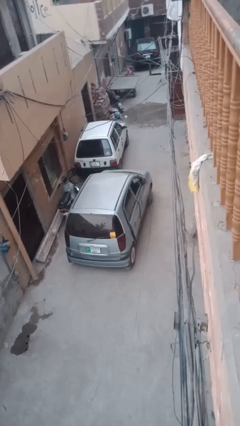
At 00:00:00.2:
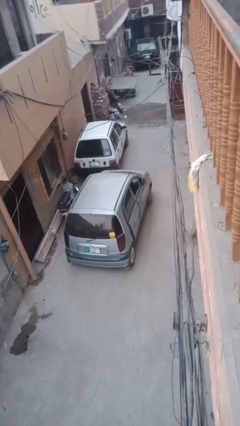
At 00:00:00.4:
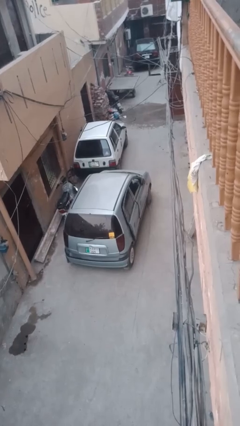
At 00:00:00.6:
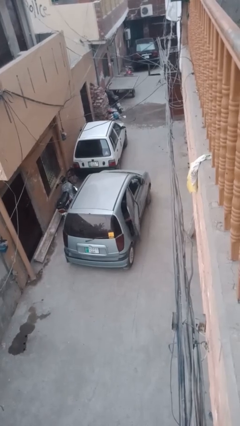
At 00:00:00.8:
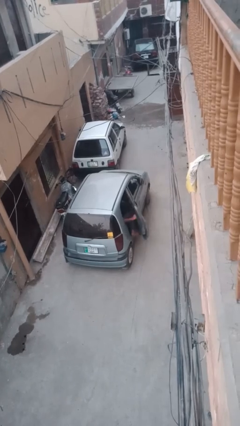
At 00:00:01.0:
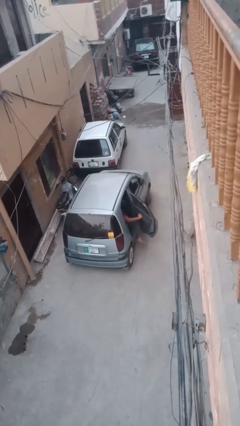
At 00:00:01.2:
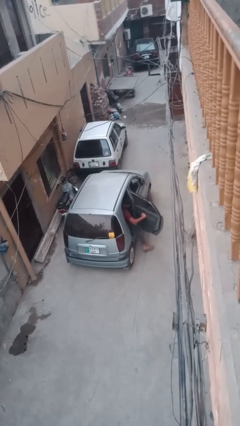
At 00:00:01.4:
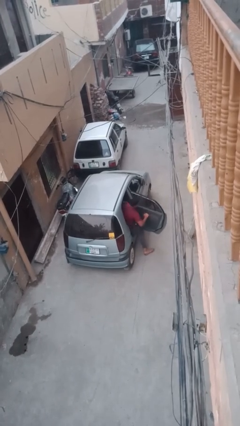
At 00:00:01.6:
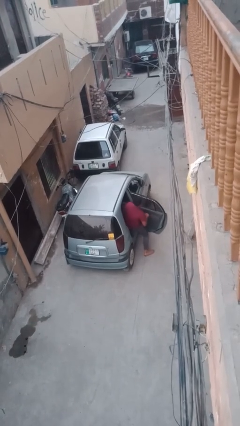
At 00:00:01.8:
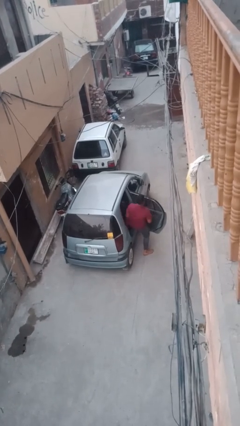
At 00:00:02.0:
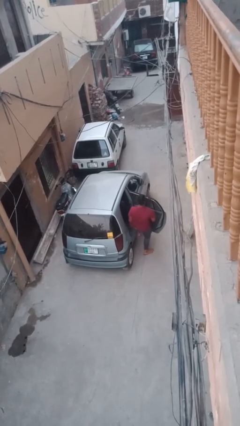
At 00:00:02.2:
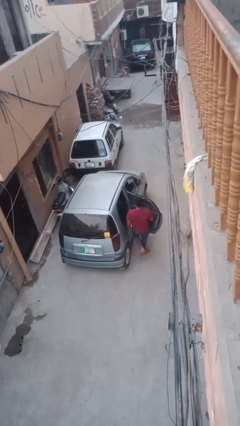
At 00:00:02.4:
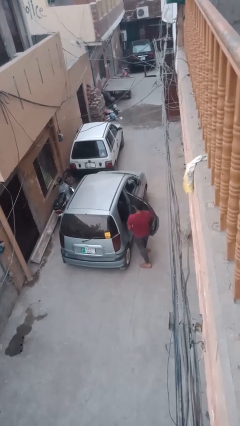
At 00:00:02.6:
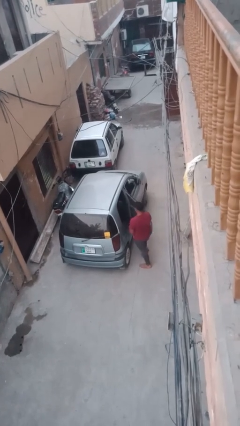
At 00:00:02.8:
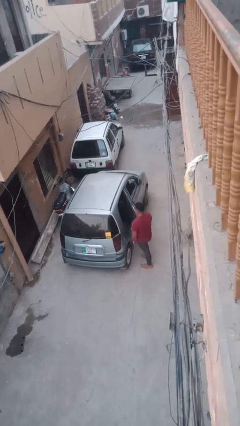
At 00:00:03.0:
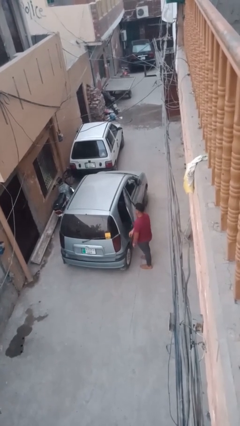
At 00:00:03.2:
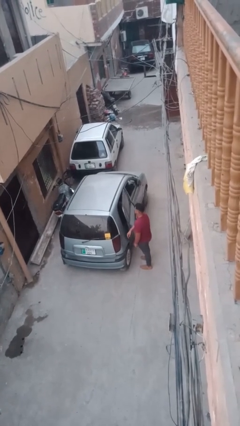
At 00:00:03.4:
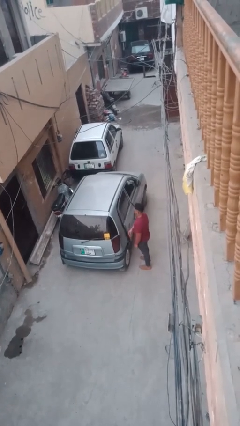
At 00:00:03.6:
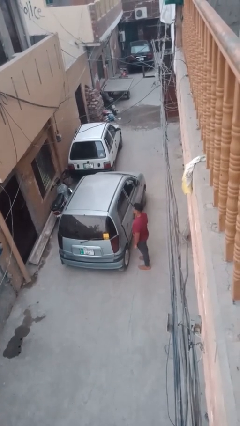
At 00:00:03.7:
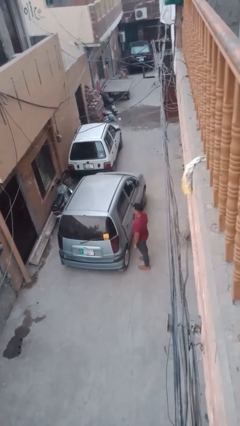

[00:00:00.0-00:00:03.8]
car drops off person

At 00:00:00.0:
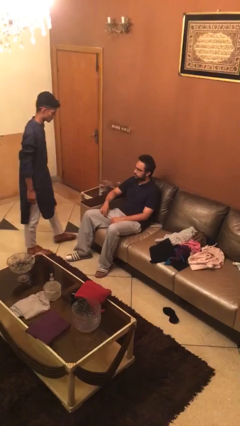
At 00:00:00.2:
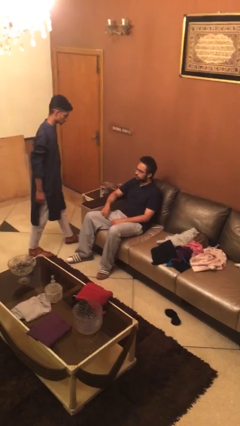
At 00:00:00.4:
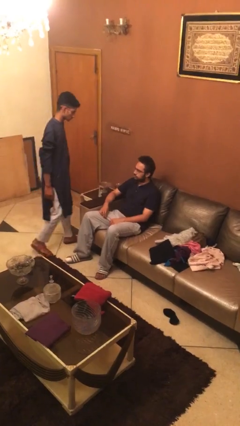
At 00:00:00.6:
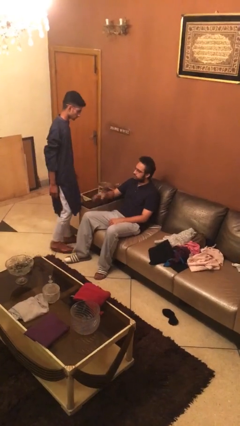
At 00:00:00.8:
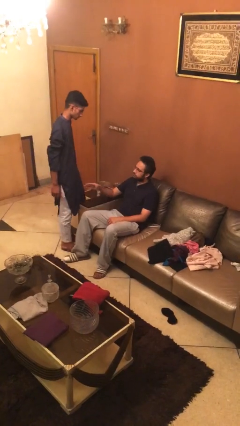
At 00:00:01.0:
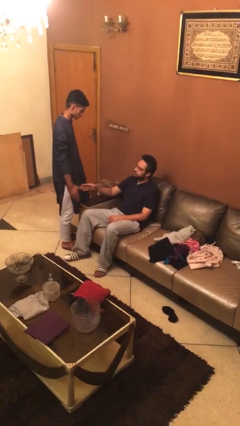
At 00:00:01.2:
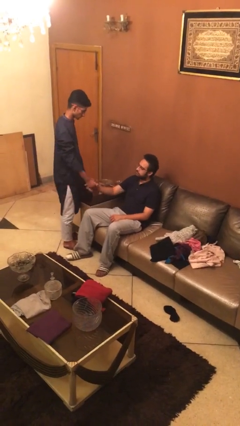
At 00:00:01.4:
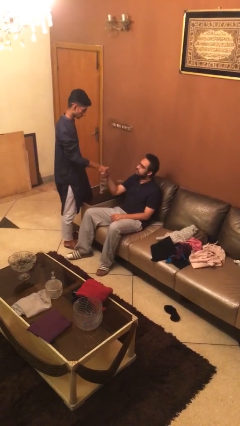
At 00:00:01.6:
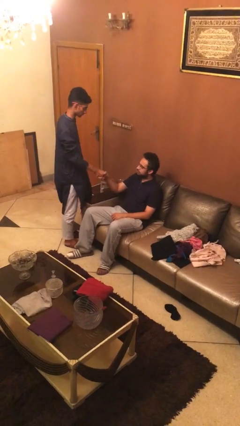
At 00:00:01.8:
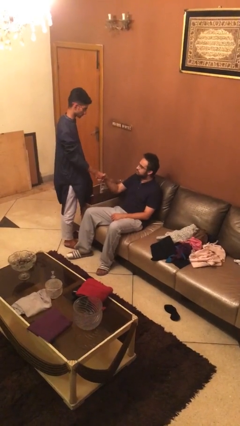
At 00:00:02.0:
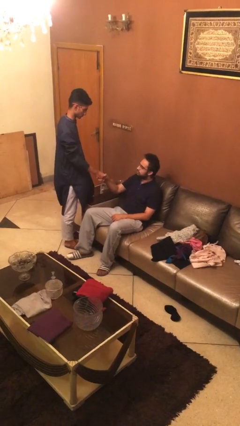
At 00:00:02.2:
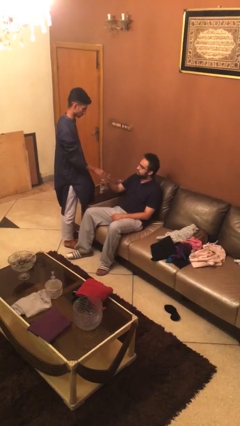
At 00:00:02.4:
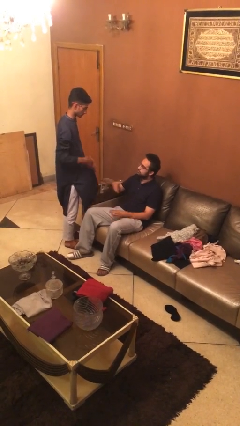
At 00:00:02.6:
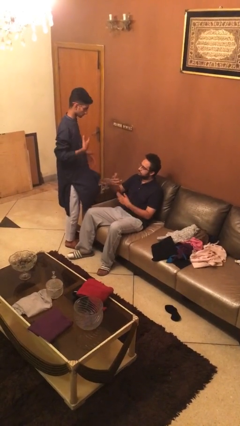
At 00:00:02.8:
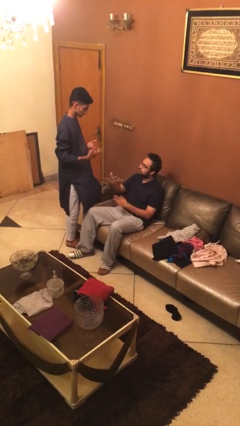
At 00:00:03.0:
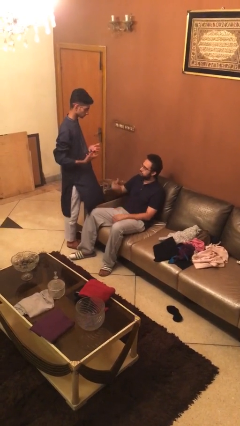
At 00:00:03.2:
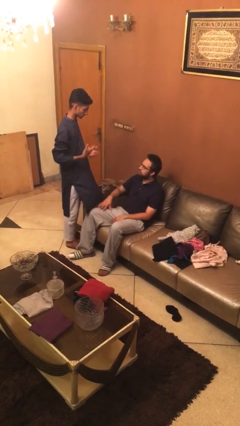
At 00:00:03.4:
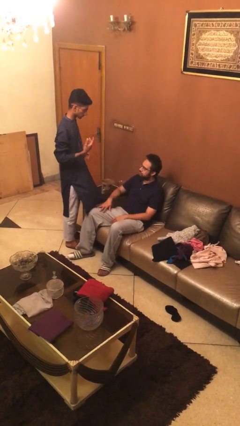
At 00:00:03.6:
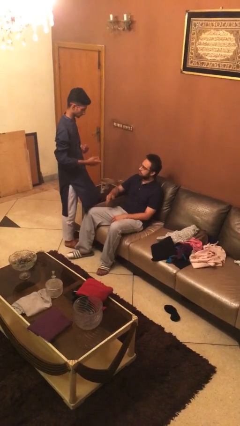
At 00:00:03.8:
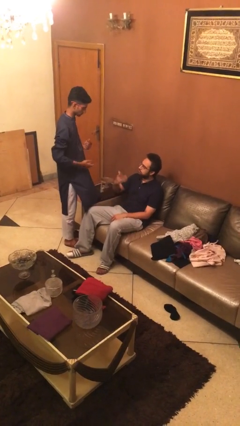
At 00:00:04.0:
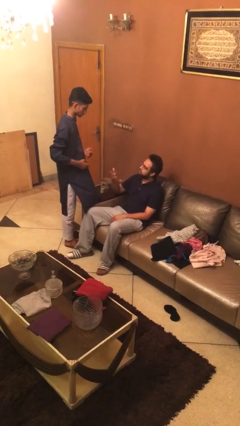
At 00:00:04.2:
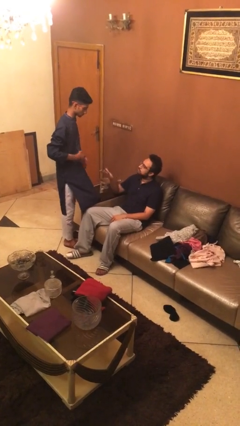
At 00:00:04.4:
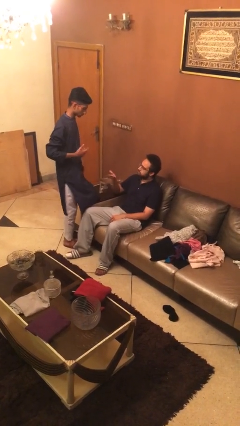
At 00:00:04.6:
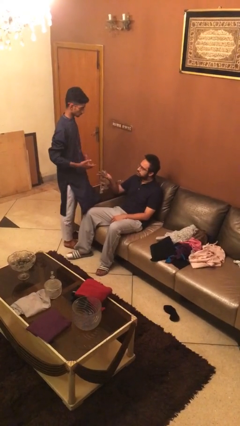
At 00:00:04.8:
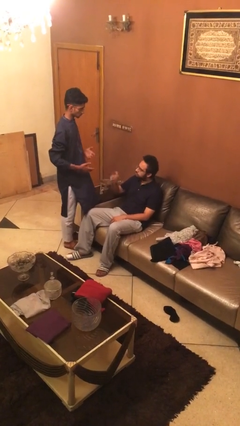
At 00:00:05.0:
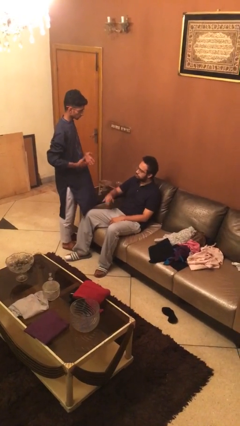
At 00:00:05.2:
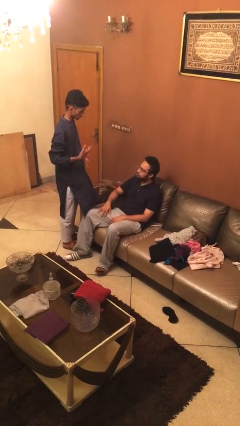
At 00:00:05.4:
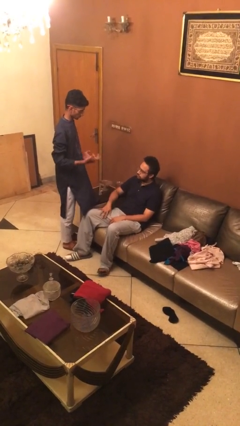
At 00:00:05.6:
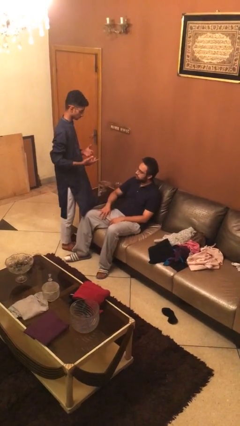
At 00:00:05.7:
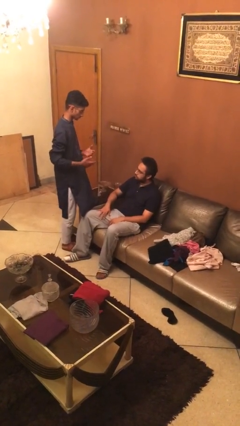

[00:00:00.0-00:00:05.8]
person shakes hand

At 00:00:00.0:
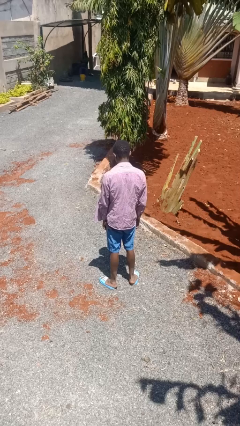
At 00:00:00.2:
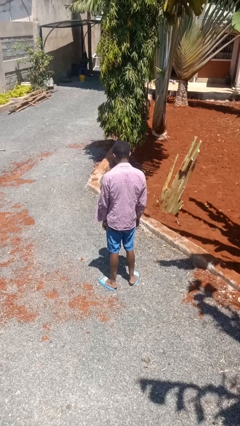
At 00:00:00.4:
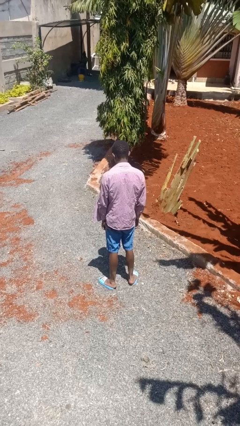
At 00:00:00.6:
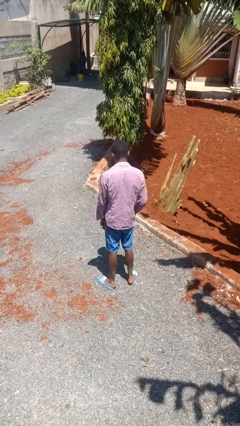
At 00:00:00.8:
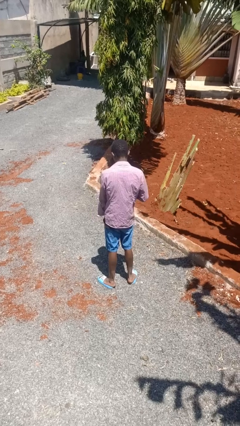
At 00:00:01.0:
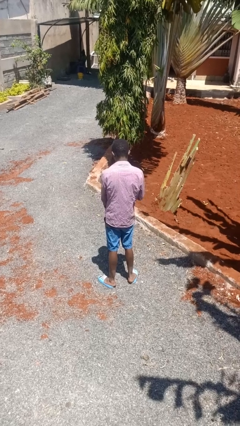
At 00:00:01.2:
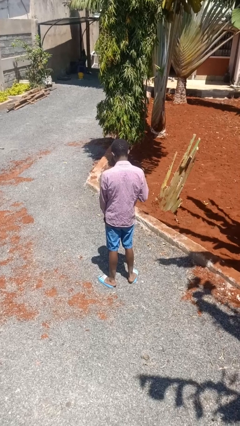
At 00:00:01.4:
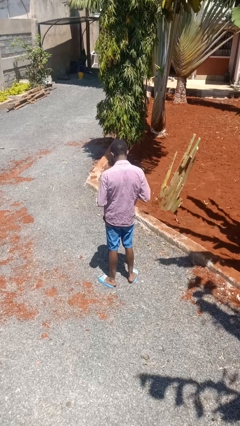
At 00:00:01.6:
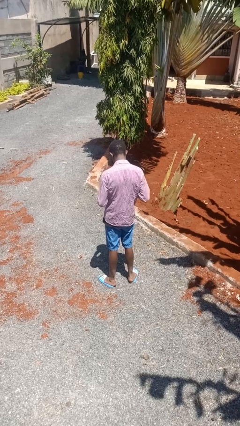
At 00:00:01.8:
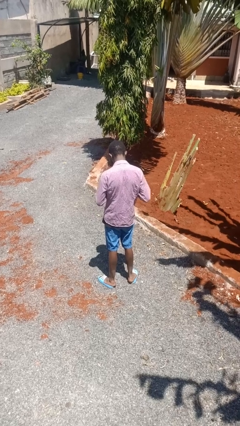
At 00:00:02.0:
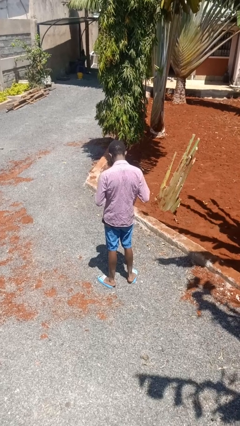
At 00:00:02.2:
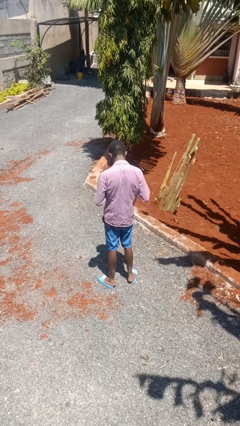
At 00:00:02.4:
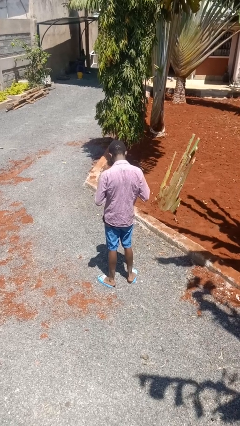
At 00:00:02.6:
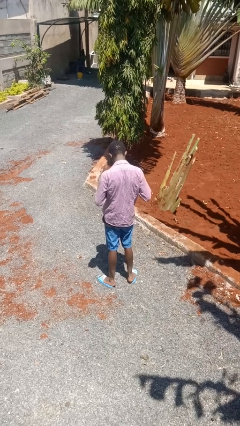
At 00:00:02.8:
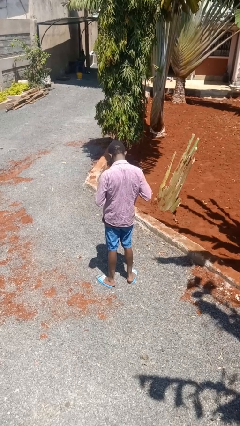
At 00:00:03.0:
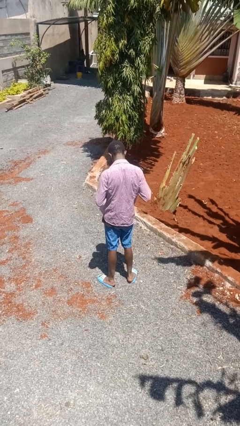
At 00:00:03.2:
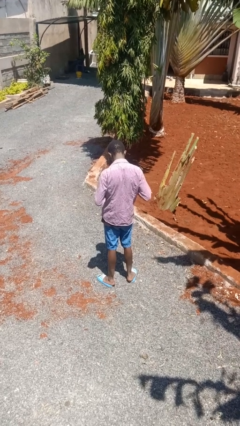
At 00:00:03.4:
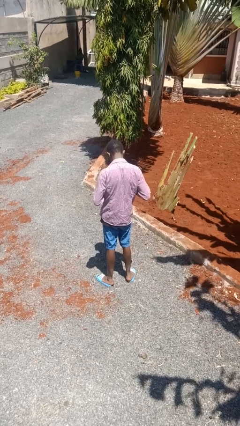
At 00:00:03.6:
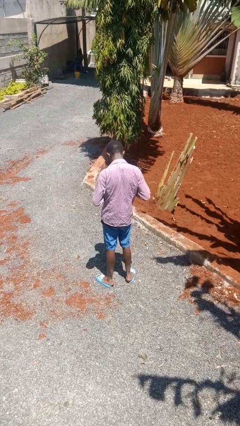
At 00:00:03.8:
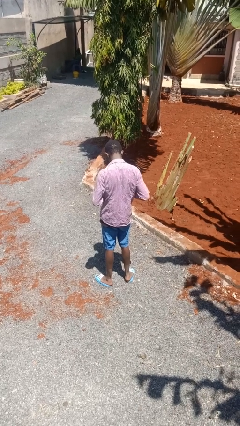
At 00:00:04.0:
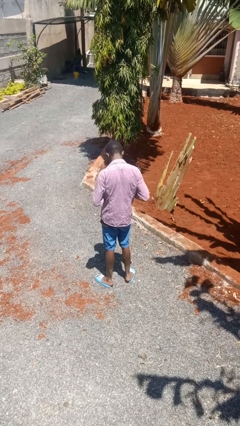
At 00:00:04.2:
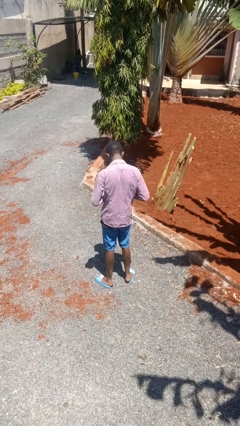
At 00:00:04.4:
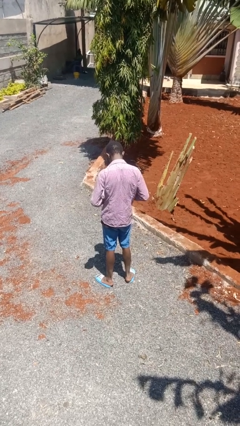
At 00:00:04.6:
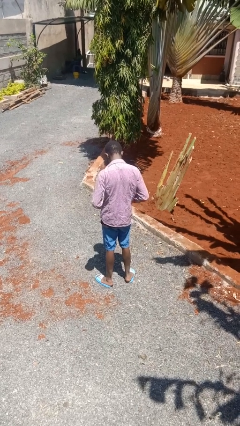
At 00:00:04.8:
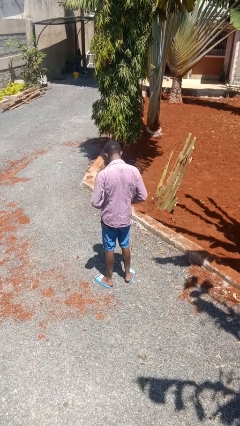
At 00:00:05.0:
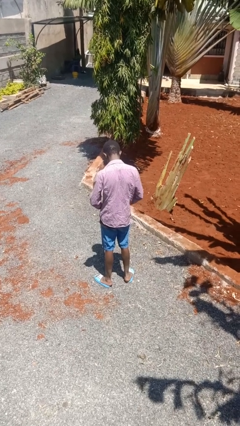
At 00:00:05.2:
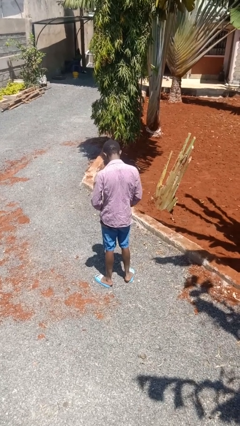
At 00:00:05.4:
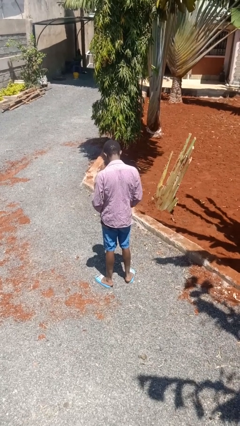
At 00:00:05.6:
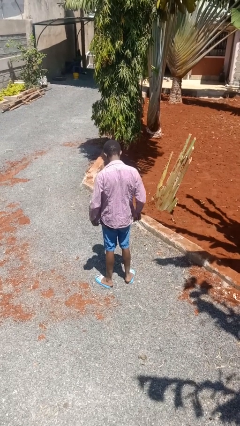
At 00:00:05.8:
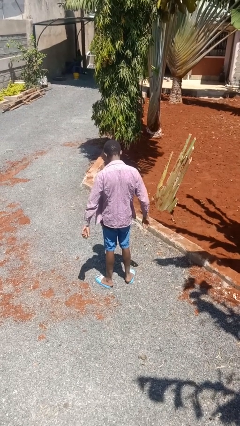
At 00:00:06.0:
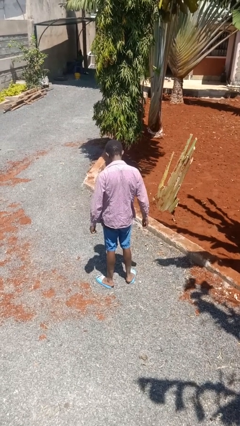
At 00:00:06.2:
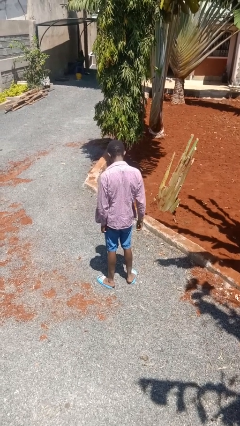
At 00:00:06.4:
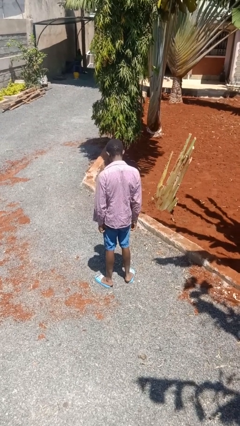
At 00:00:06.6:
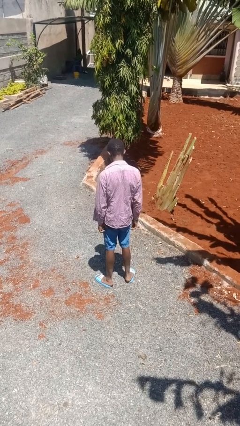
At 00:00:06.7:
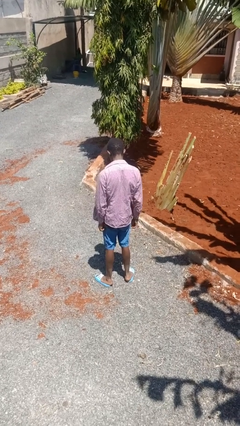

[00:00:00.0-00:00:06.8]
person unbuttons shirt

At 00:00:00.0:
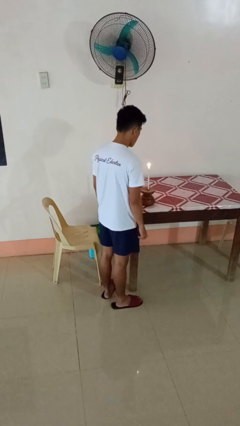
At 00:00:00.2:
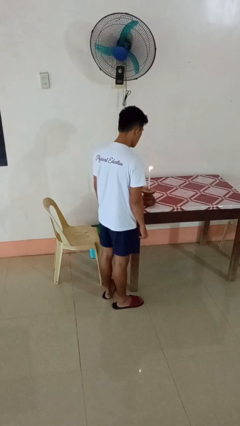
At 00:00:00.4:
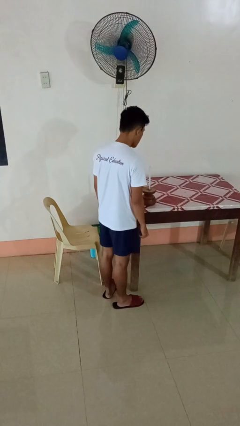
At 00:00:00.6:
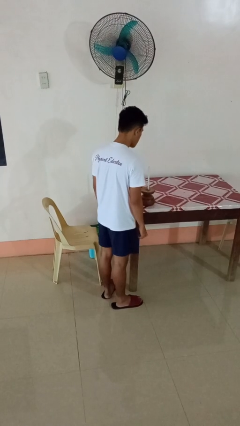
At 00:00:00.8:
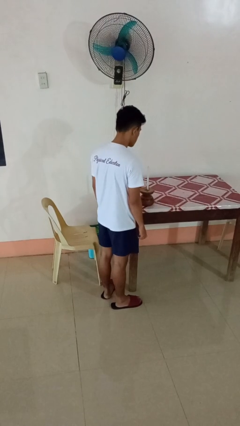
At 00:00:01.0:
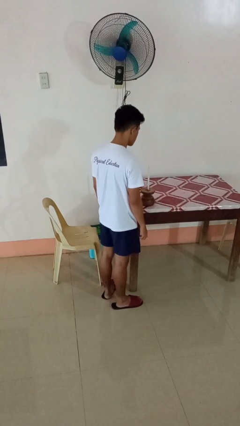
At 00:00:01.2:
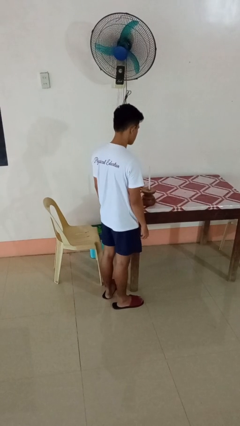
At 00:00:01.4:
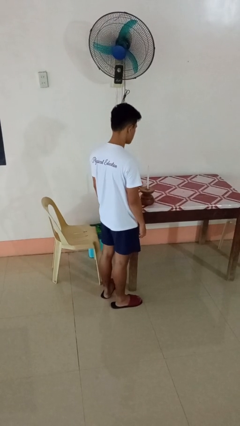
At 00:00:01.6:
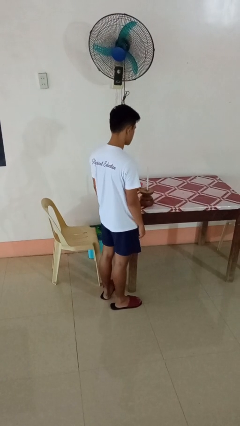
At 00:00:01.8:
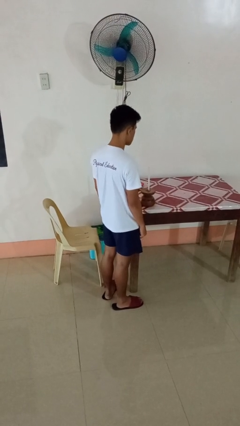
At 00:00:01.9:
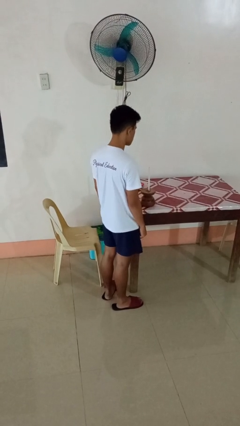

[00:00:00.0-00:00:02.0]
person extinguishes candle
